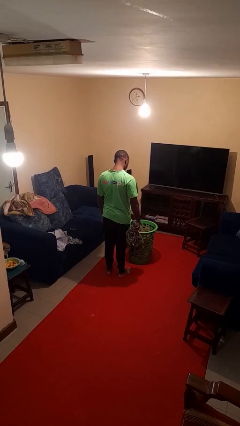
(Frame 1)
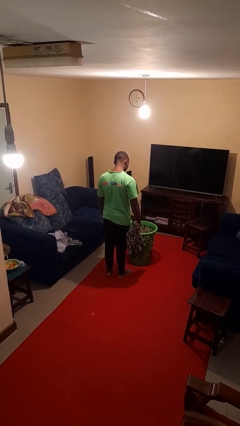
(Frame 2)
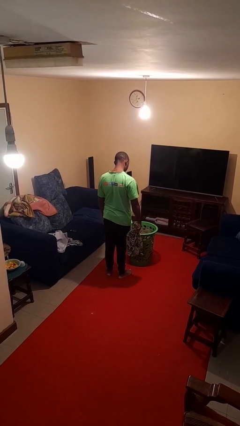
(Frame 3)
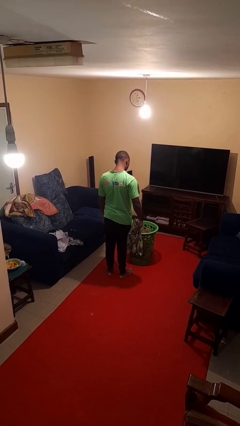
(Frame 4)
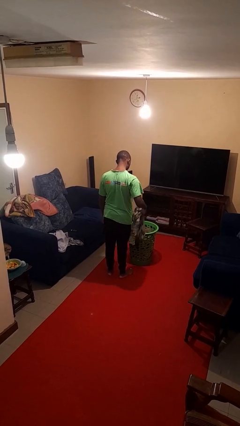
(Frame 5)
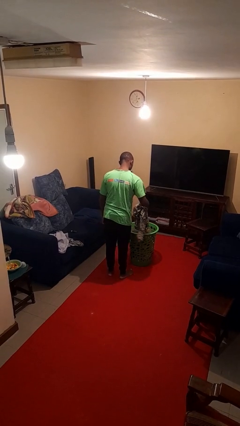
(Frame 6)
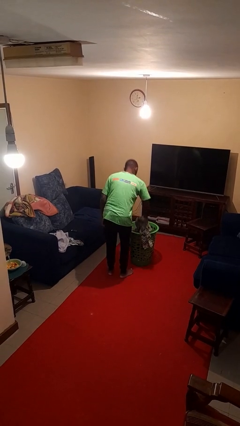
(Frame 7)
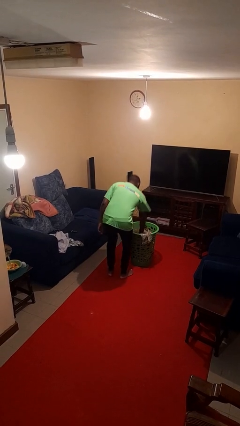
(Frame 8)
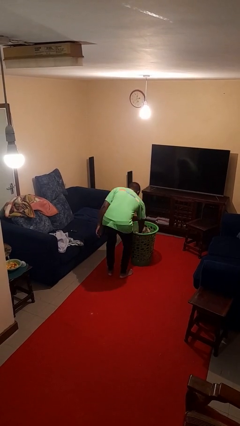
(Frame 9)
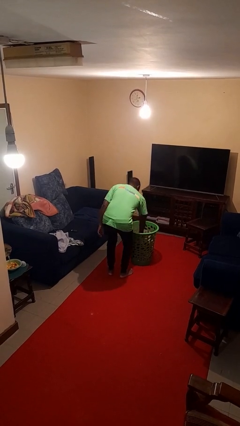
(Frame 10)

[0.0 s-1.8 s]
person puts object into basket

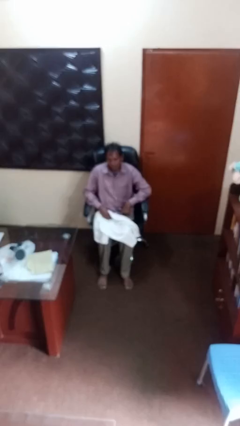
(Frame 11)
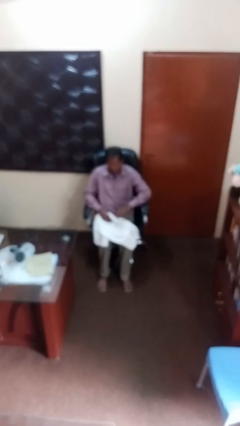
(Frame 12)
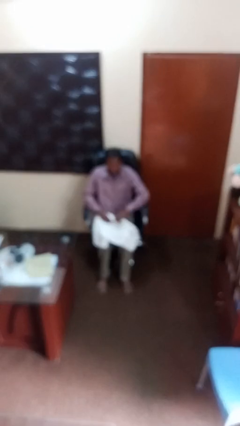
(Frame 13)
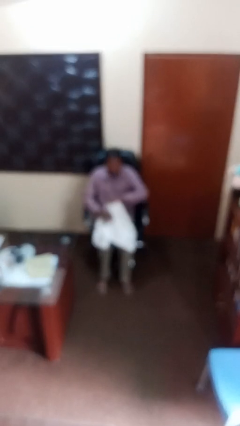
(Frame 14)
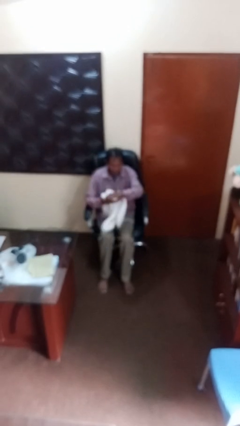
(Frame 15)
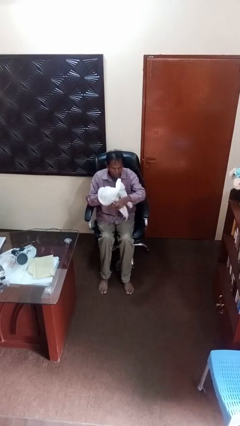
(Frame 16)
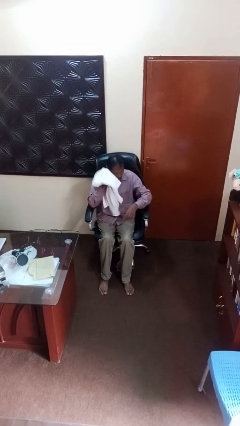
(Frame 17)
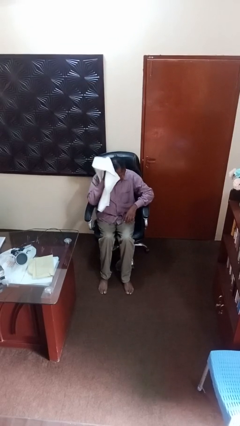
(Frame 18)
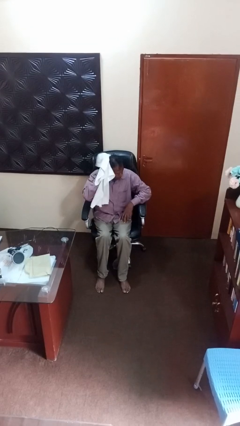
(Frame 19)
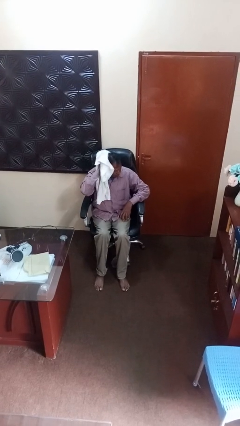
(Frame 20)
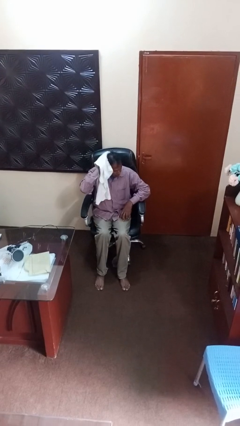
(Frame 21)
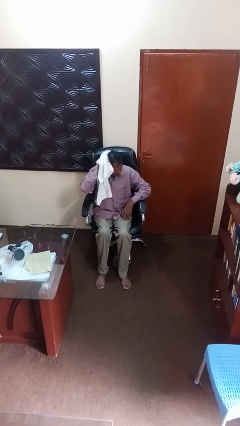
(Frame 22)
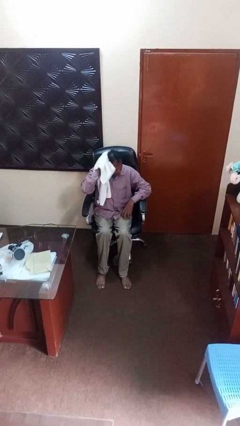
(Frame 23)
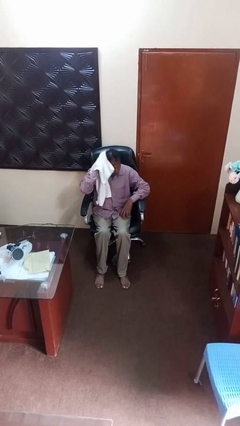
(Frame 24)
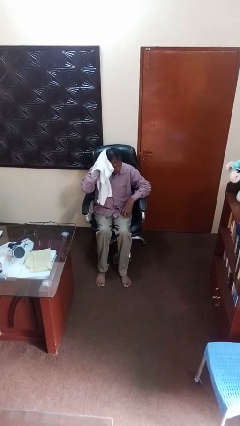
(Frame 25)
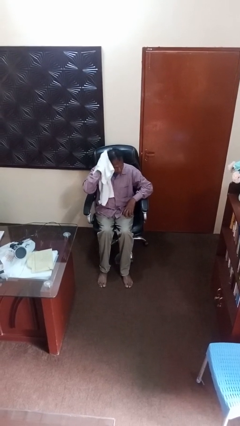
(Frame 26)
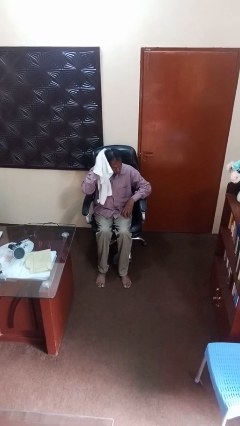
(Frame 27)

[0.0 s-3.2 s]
person dries hair with towel

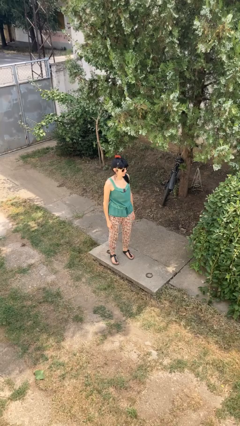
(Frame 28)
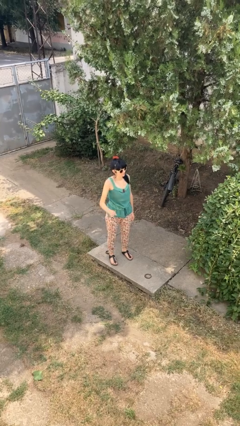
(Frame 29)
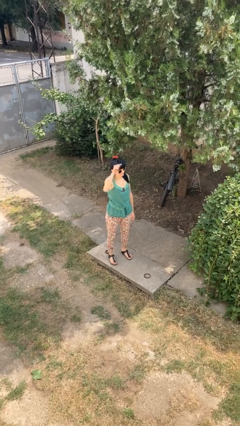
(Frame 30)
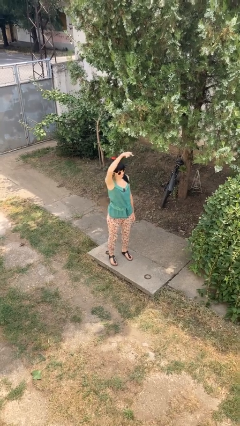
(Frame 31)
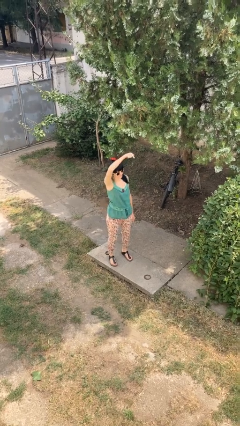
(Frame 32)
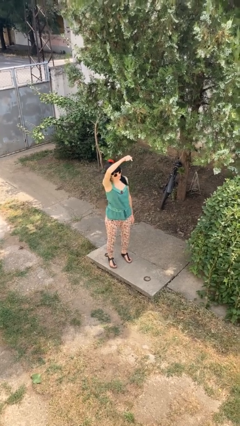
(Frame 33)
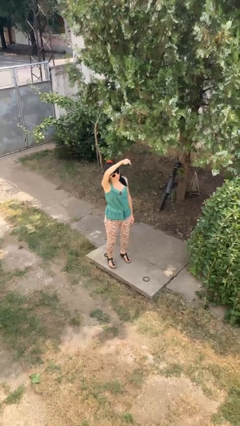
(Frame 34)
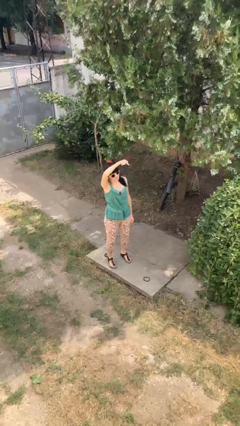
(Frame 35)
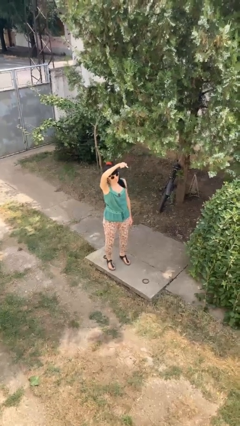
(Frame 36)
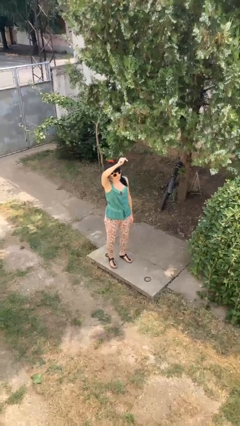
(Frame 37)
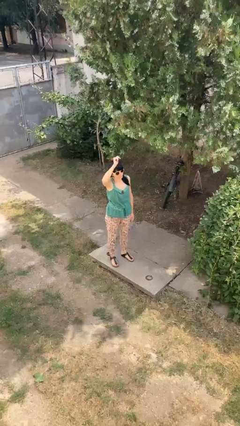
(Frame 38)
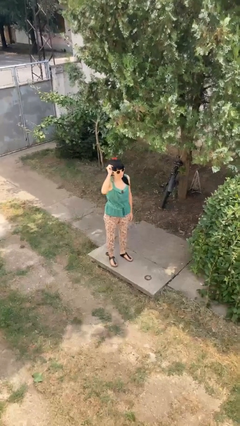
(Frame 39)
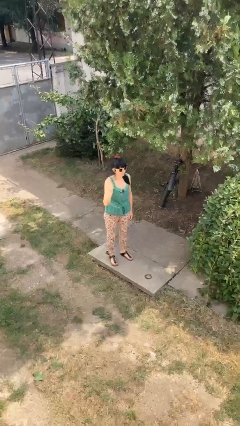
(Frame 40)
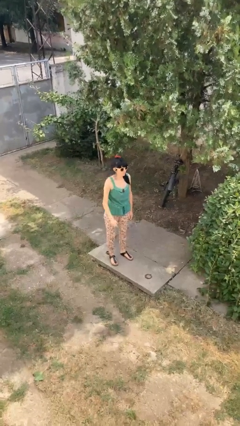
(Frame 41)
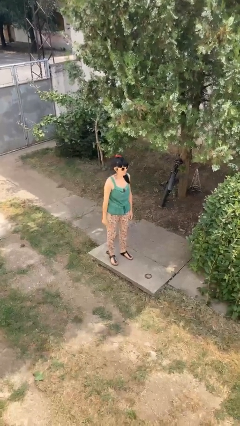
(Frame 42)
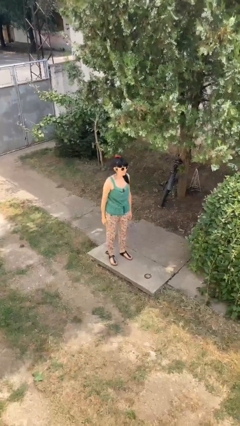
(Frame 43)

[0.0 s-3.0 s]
person points at person

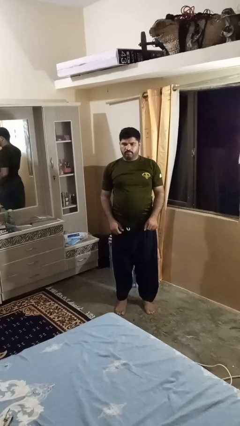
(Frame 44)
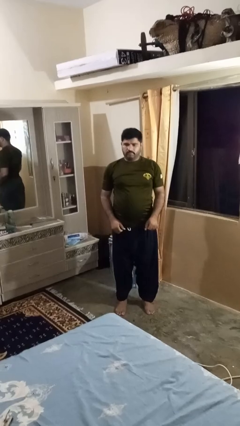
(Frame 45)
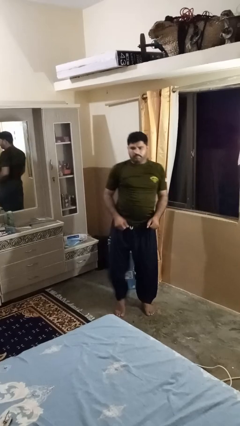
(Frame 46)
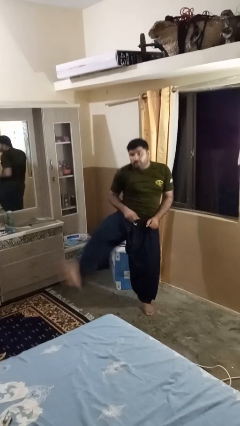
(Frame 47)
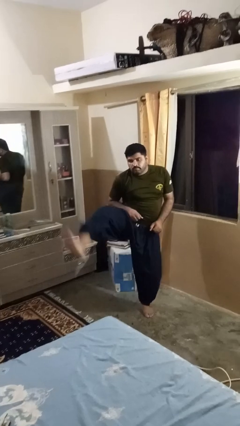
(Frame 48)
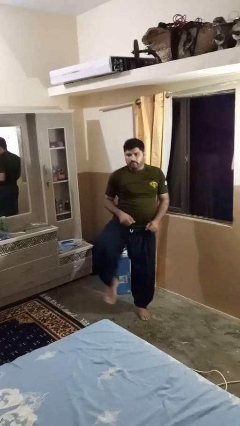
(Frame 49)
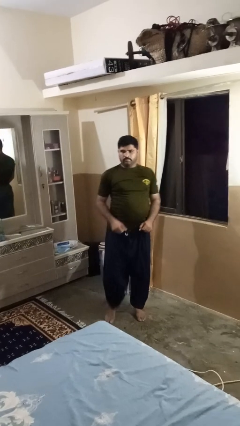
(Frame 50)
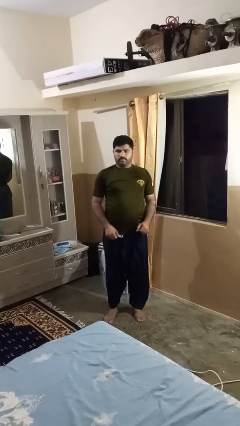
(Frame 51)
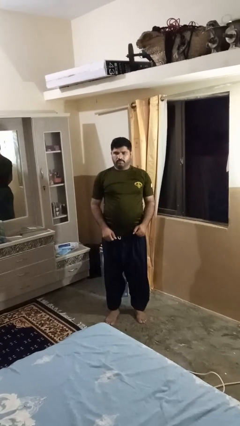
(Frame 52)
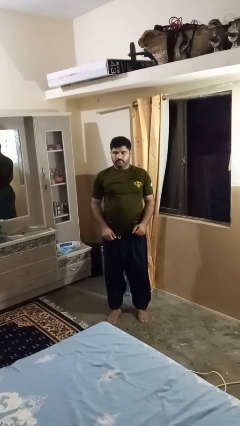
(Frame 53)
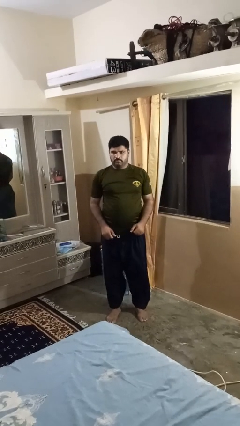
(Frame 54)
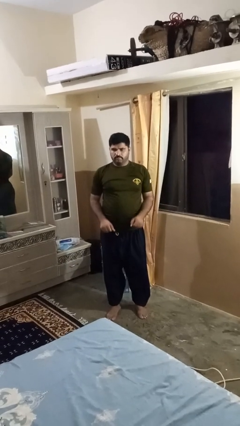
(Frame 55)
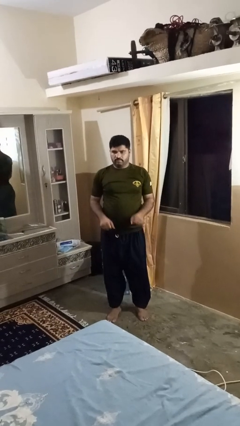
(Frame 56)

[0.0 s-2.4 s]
person karate kicks

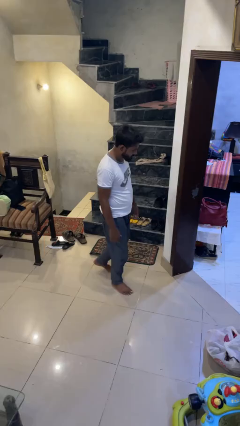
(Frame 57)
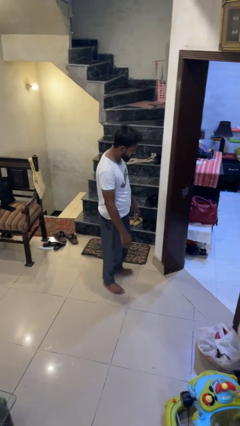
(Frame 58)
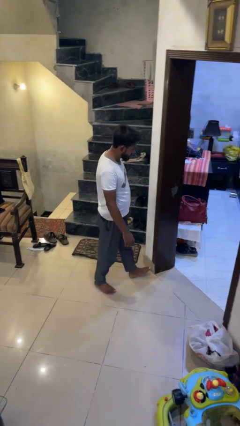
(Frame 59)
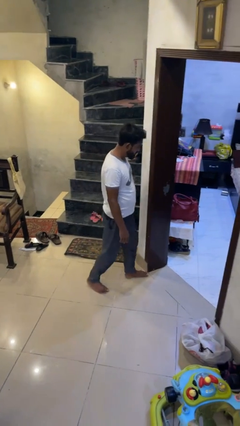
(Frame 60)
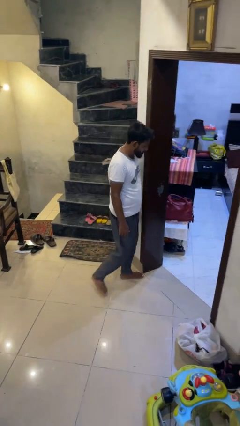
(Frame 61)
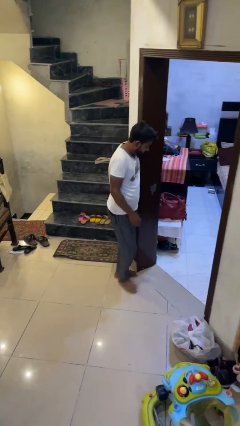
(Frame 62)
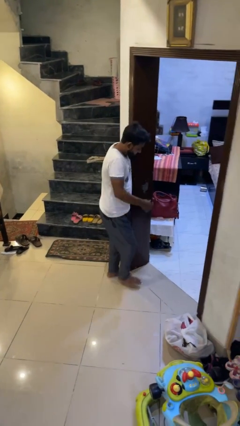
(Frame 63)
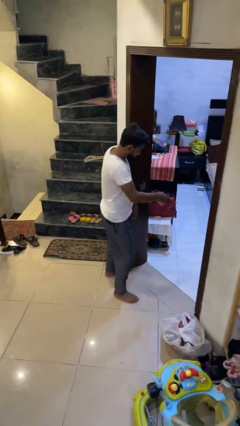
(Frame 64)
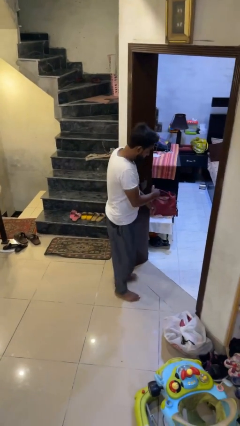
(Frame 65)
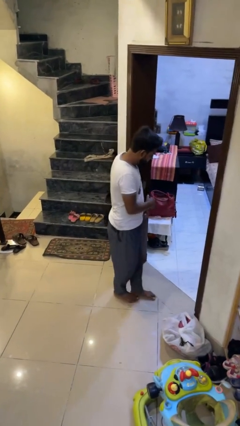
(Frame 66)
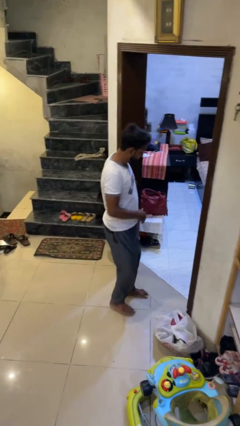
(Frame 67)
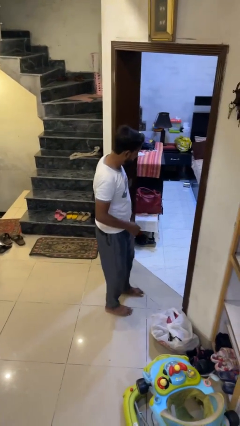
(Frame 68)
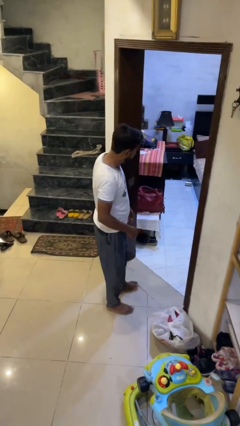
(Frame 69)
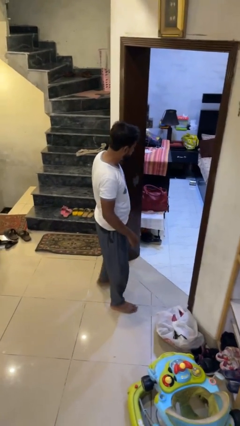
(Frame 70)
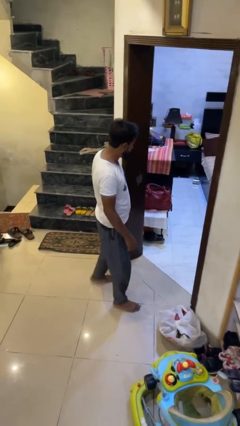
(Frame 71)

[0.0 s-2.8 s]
person bumps into wall

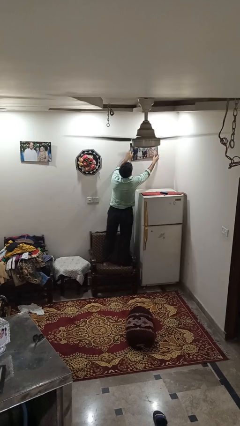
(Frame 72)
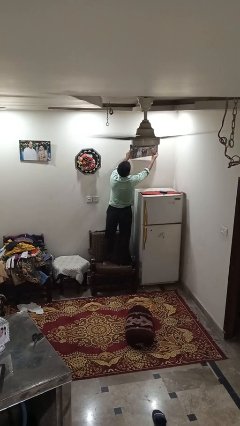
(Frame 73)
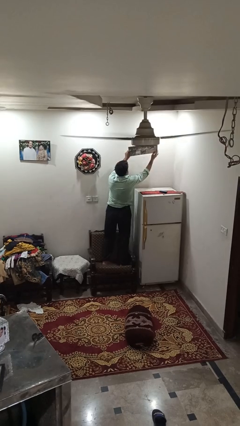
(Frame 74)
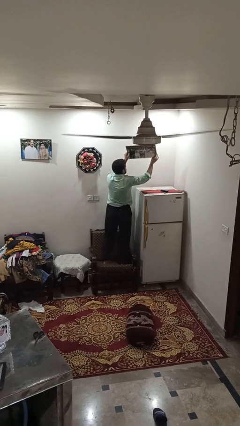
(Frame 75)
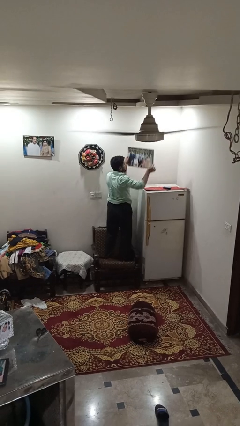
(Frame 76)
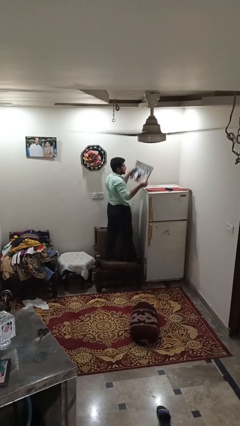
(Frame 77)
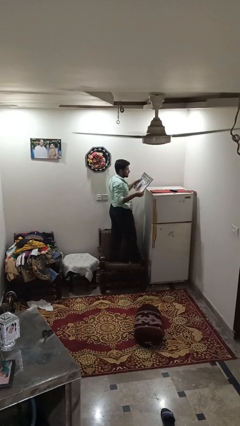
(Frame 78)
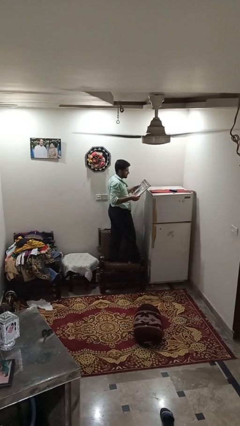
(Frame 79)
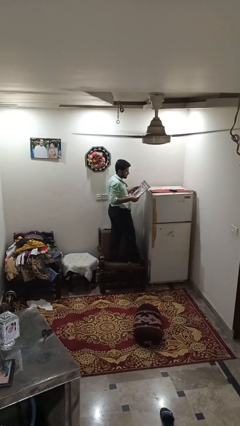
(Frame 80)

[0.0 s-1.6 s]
person takes down picture frame

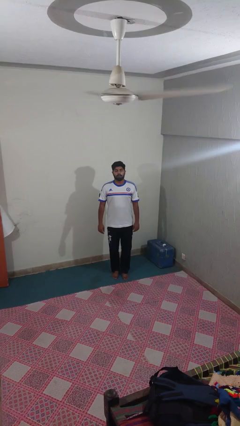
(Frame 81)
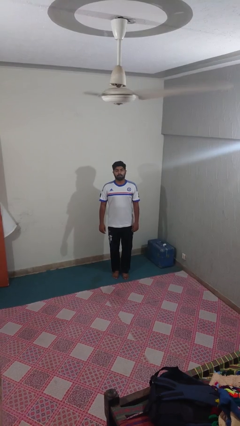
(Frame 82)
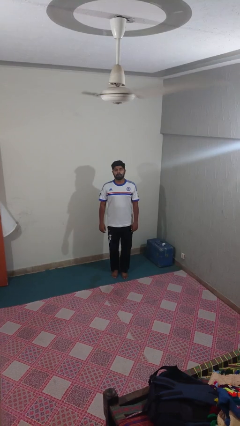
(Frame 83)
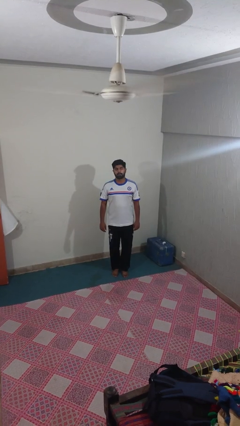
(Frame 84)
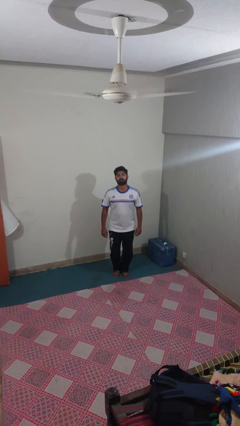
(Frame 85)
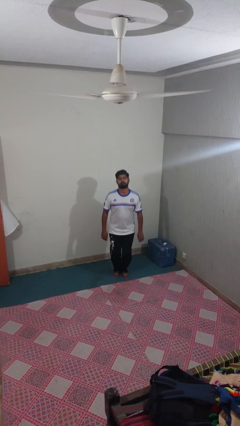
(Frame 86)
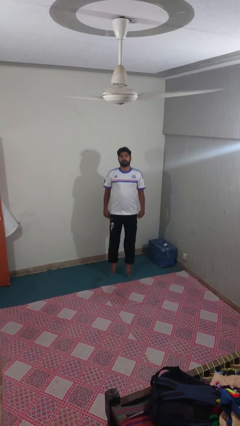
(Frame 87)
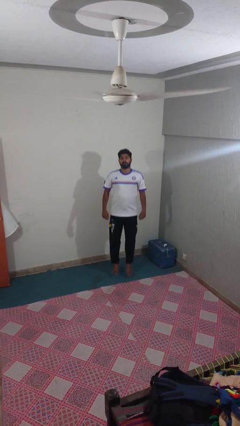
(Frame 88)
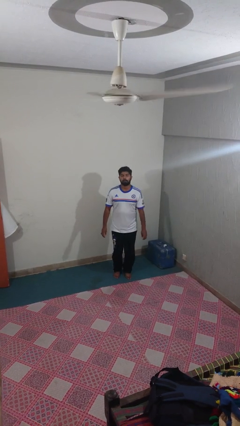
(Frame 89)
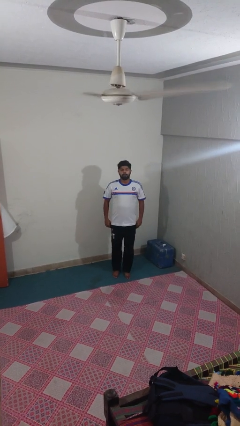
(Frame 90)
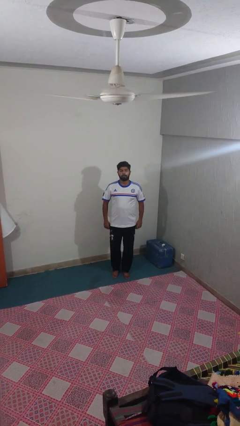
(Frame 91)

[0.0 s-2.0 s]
person jumps
